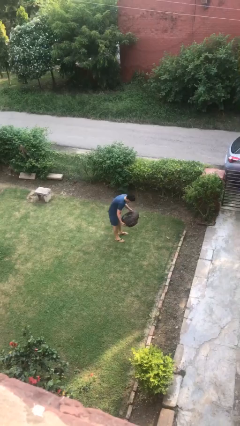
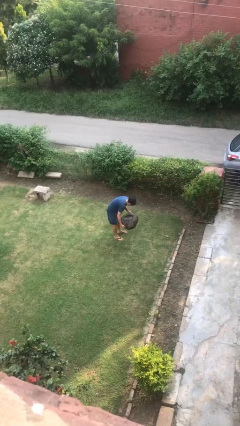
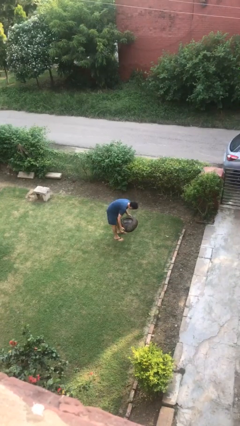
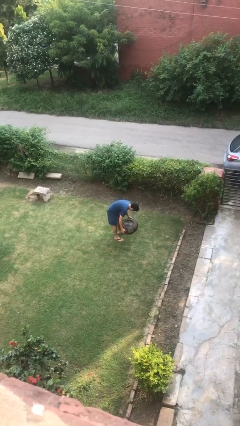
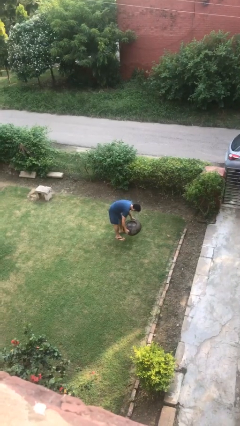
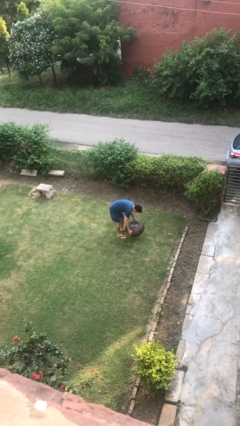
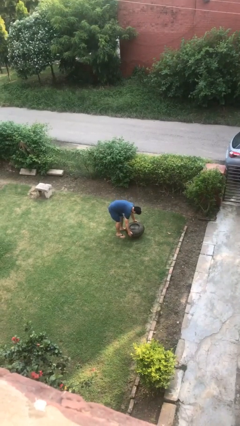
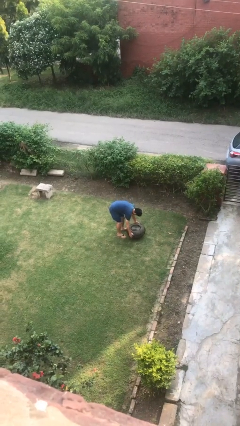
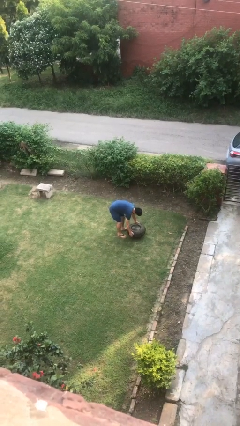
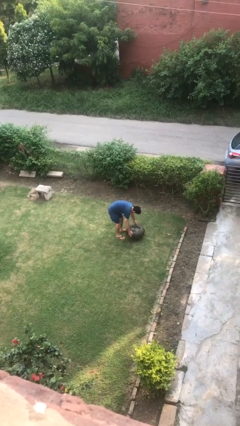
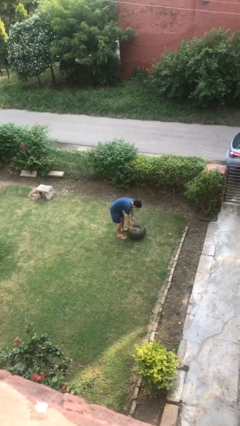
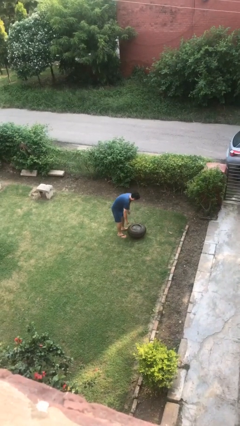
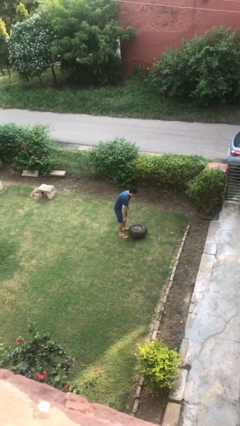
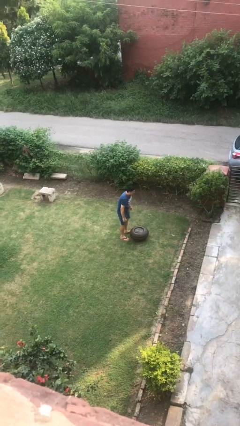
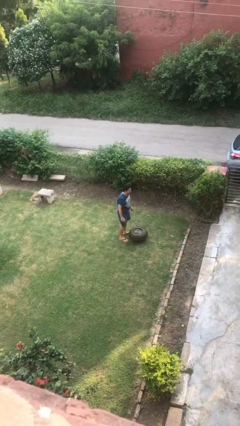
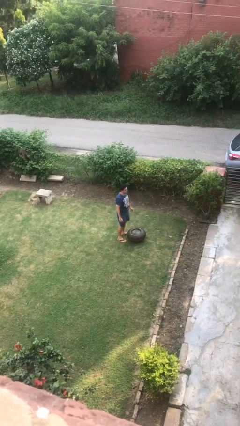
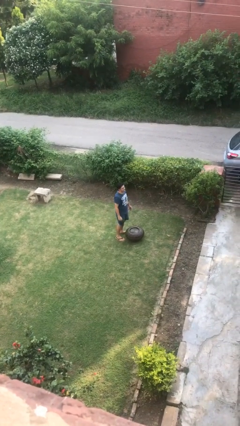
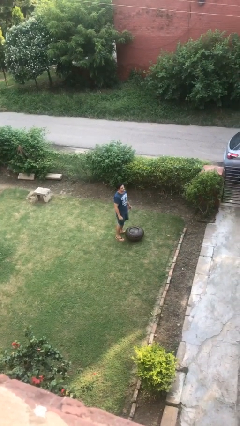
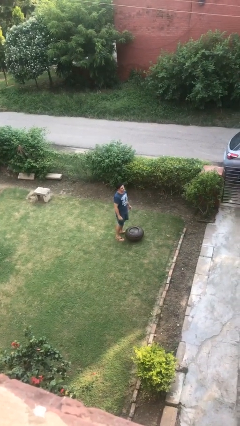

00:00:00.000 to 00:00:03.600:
person puts down object on floor

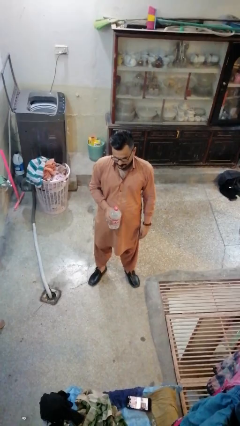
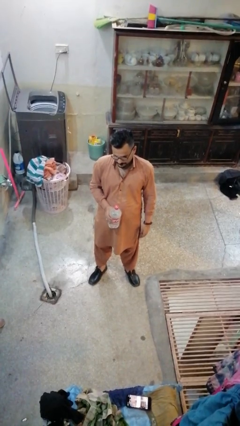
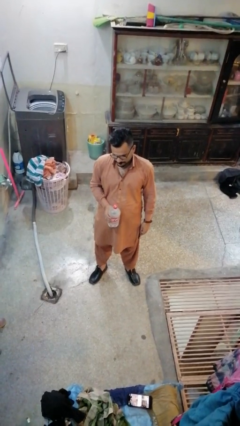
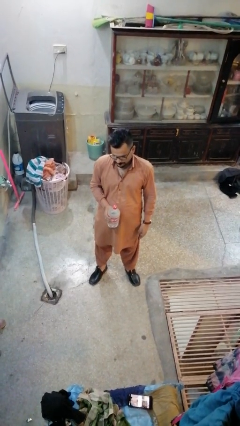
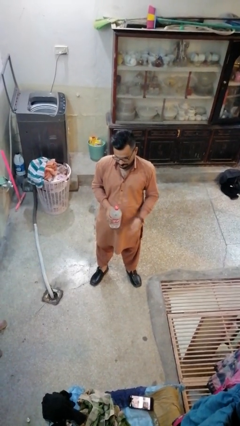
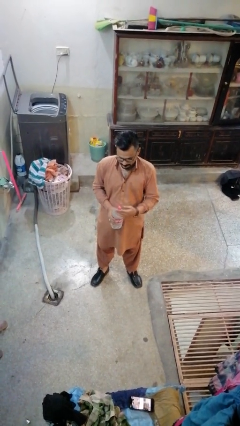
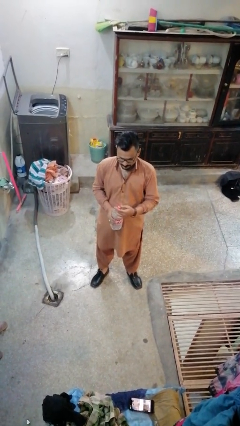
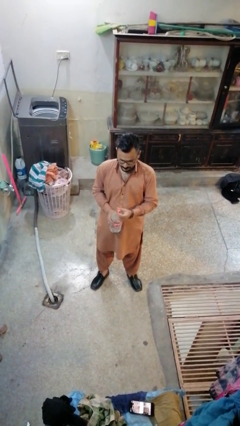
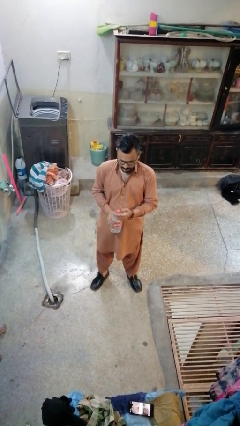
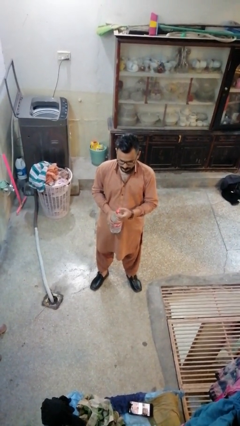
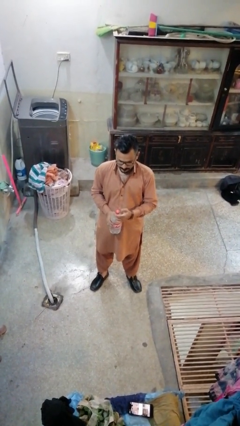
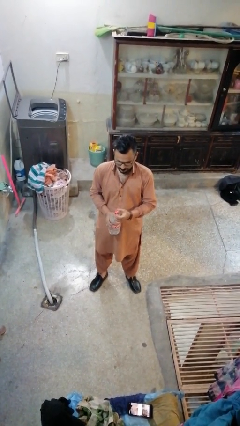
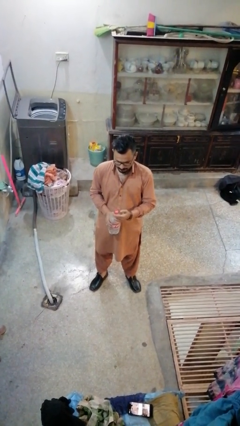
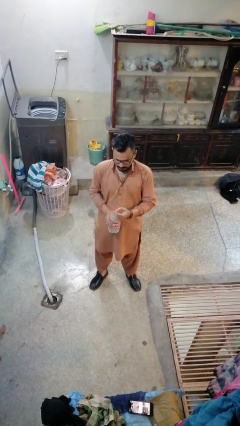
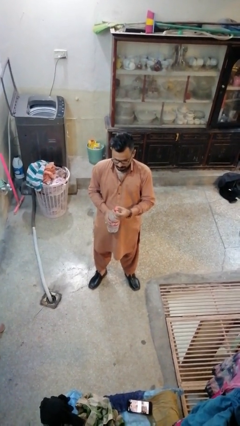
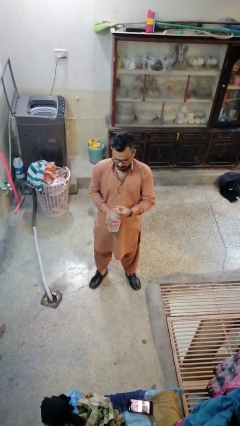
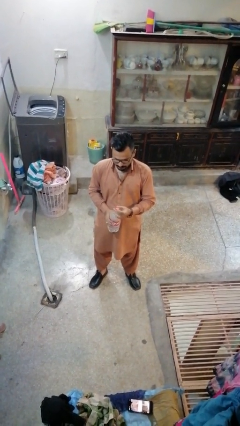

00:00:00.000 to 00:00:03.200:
person unscrews lid from bottle

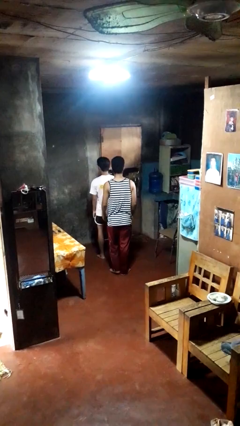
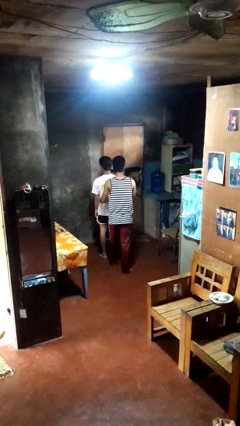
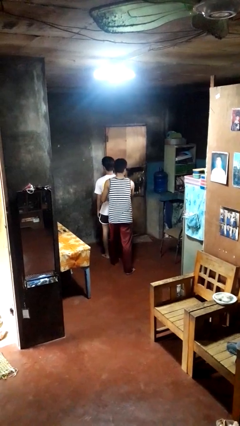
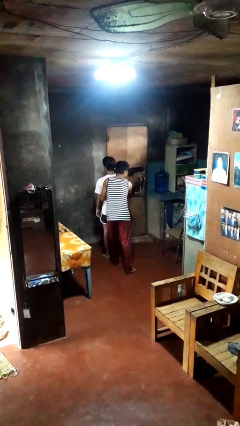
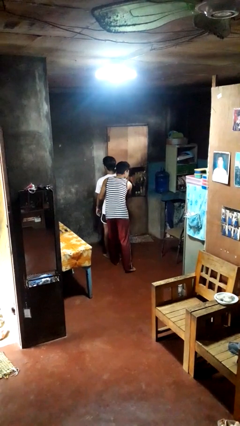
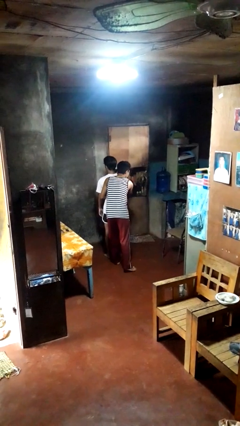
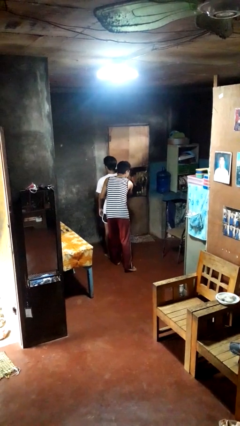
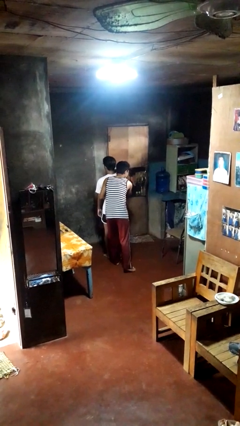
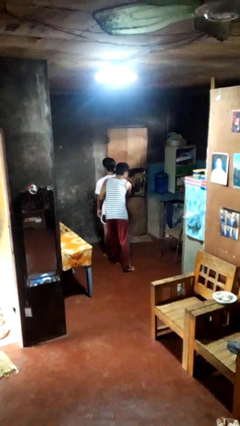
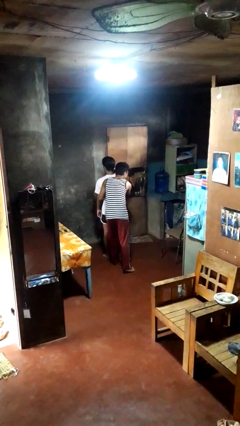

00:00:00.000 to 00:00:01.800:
person hugs person from behind

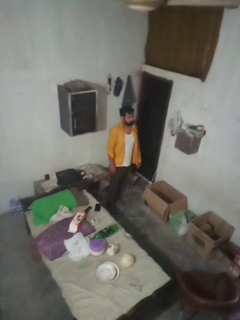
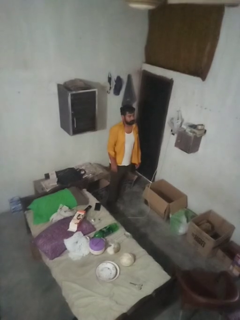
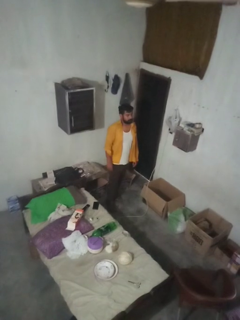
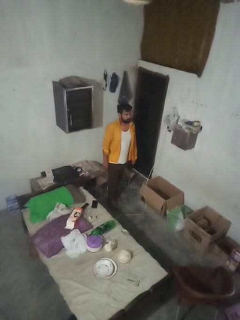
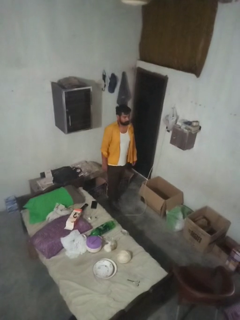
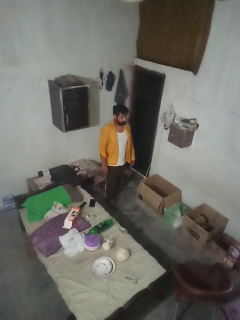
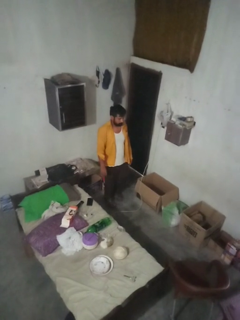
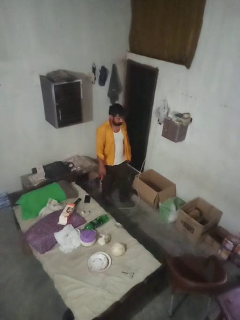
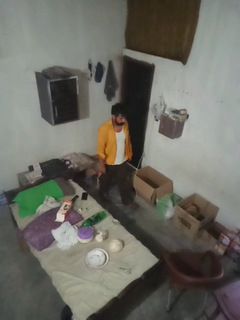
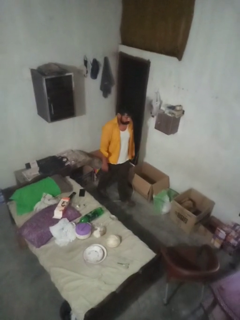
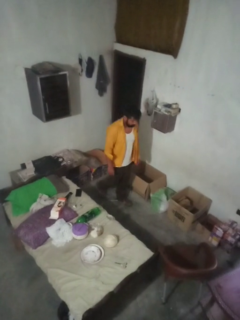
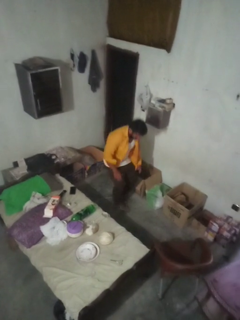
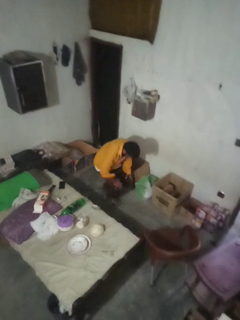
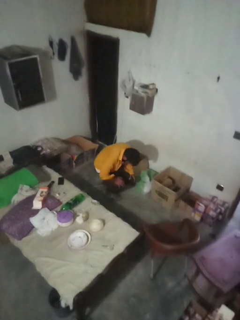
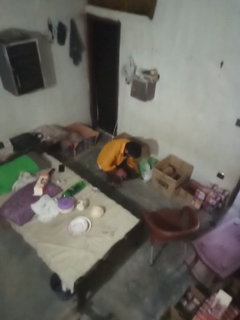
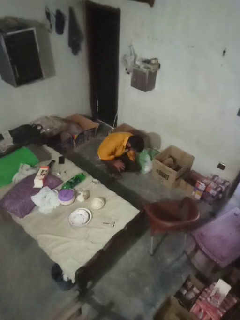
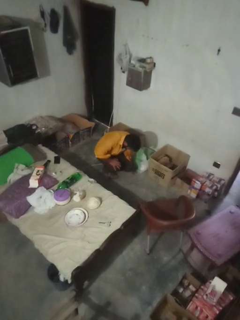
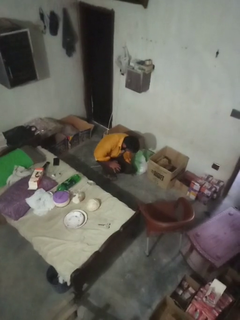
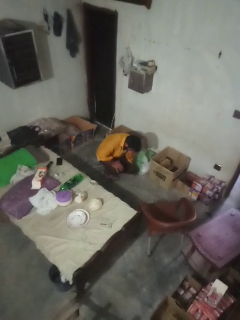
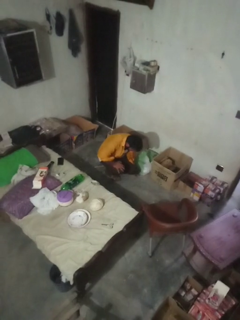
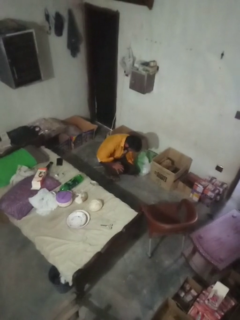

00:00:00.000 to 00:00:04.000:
person trips on object on floor

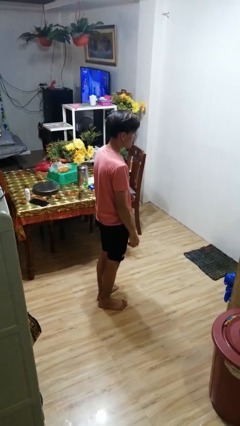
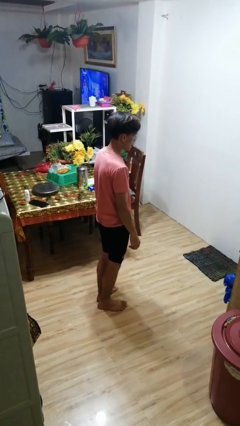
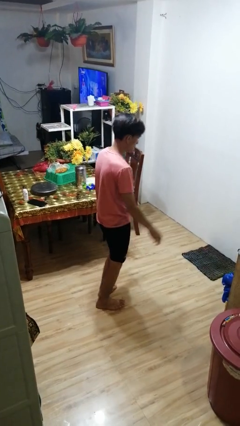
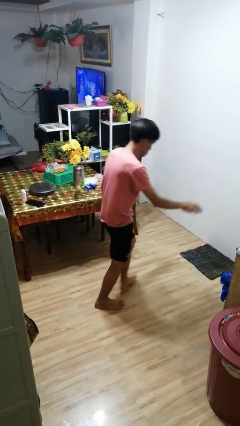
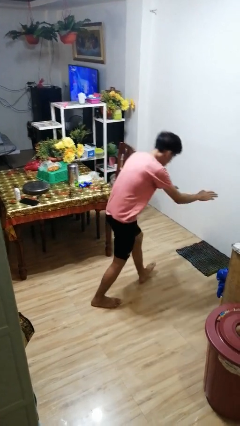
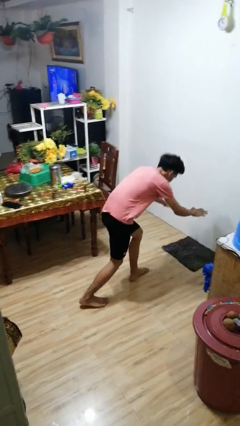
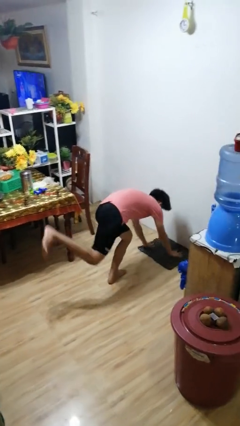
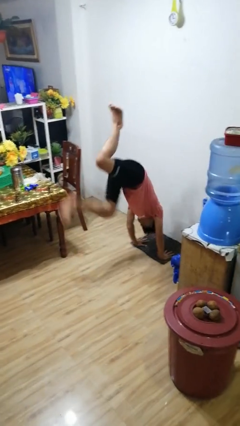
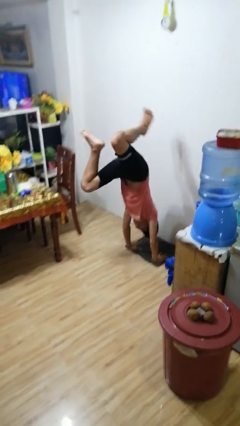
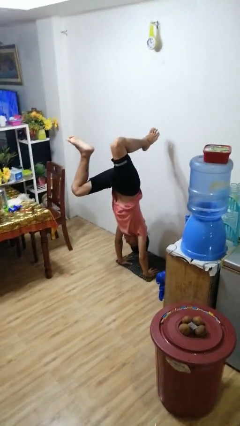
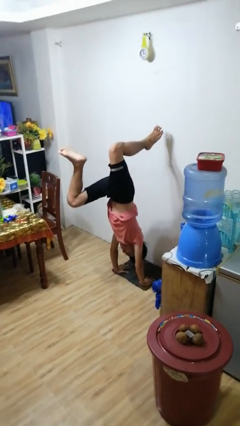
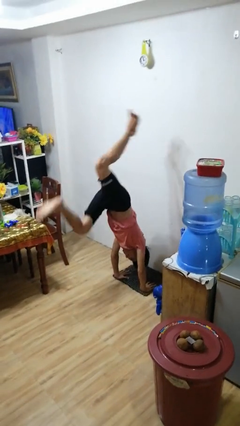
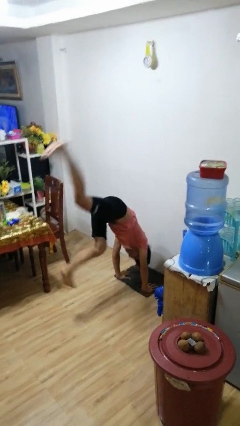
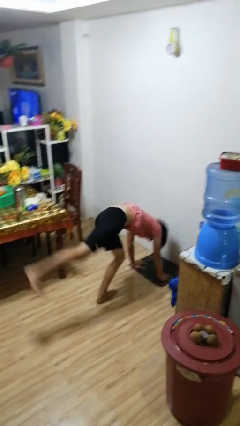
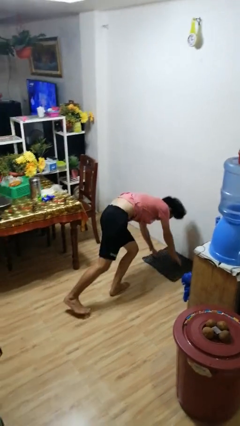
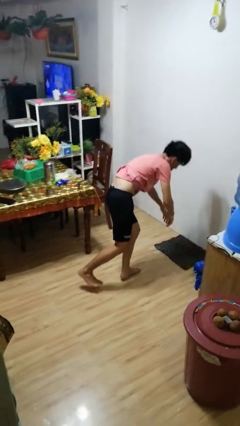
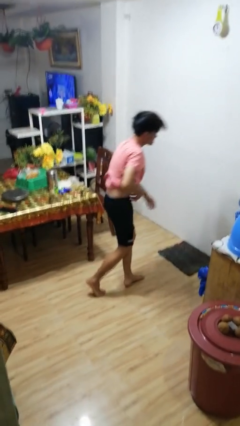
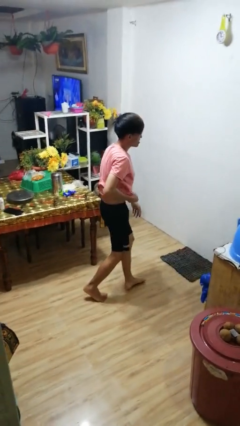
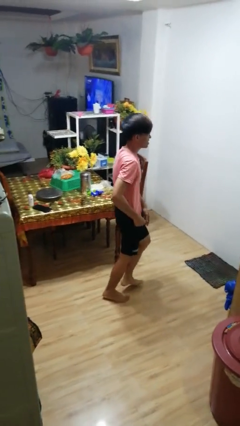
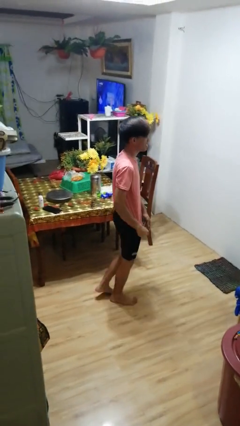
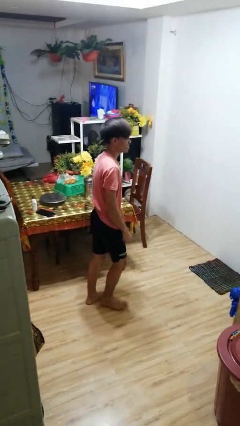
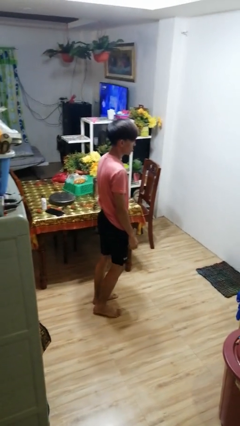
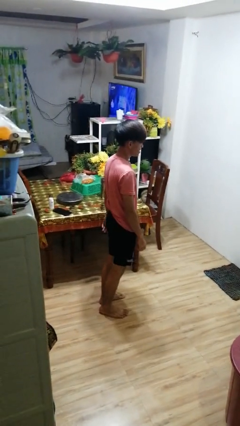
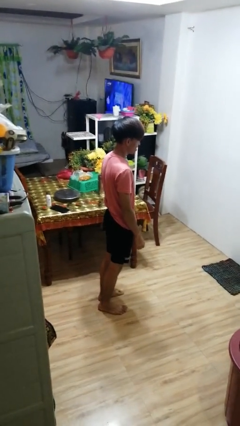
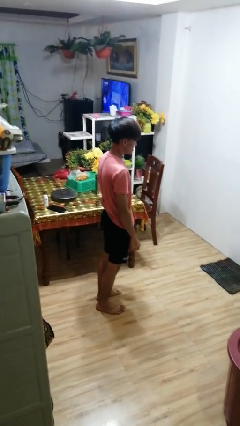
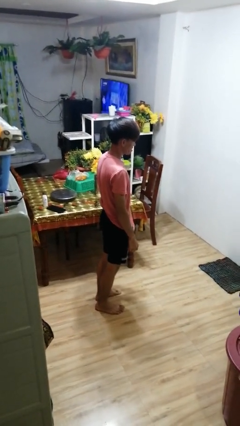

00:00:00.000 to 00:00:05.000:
person handstand

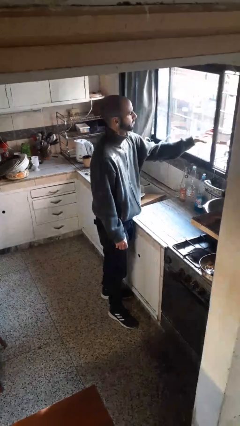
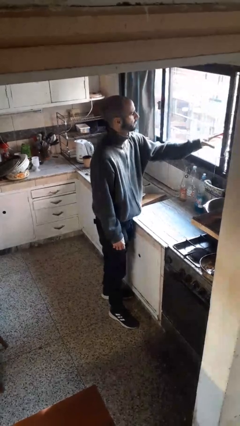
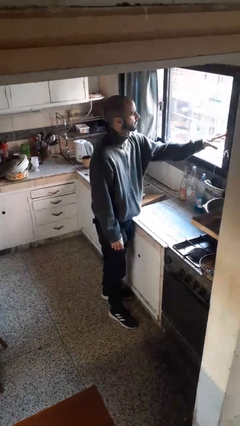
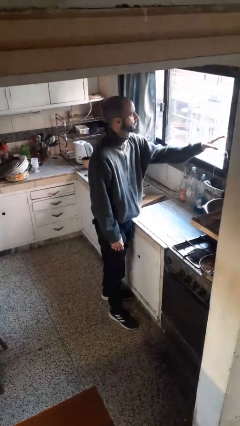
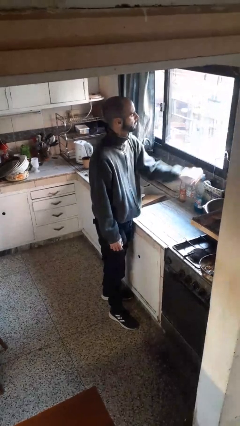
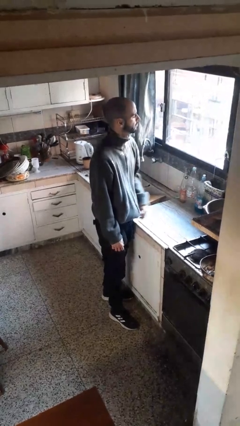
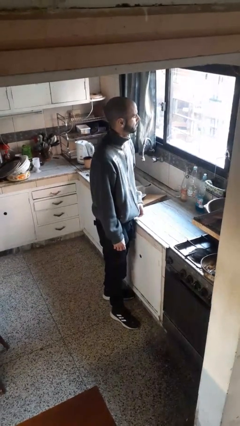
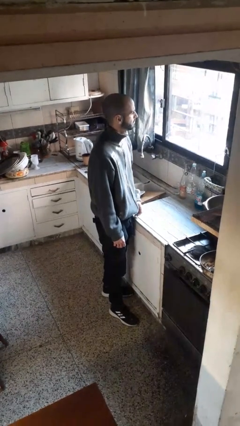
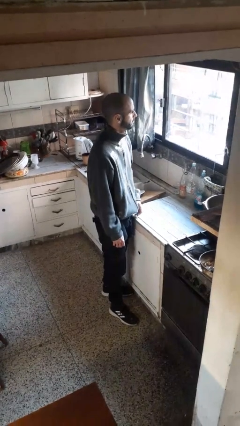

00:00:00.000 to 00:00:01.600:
person closes home window
